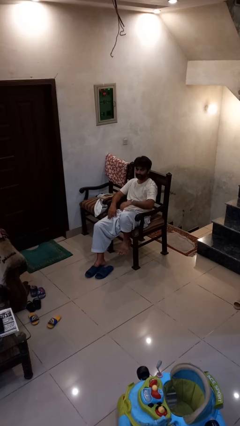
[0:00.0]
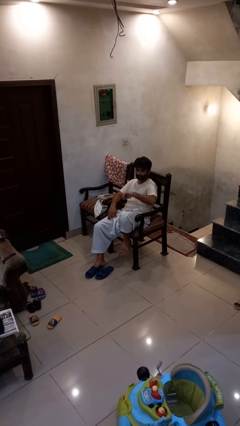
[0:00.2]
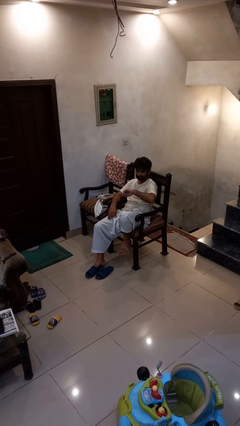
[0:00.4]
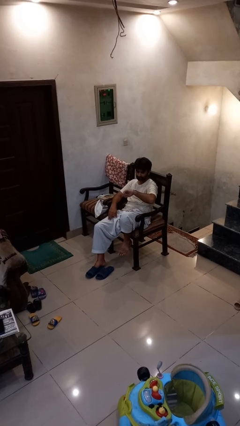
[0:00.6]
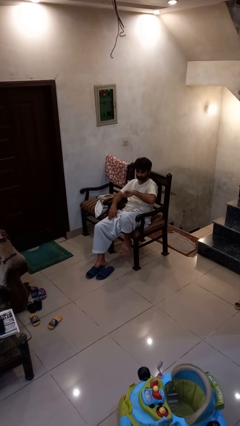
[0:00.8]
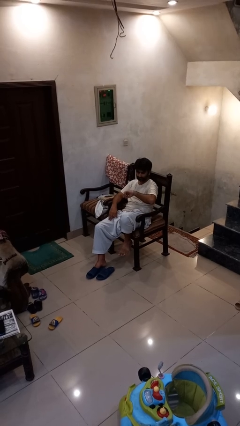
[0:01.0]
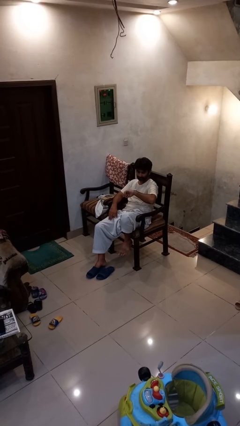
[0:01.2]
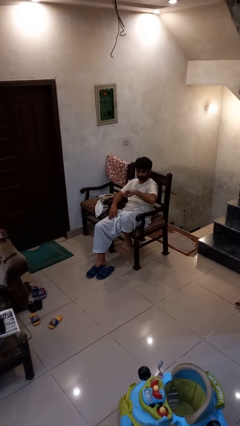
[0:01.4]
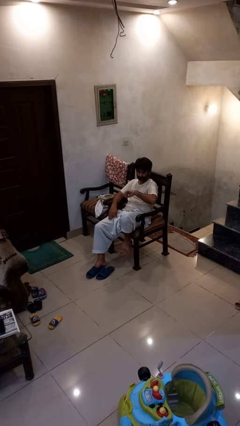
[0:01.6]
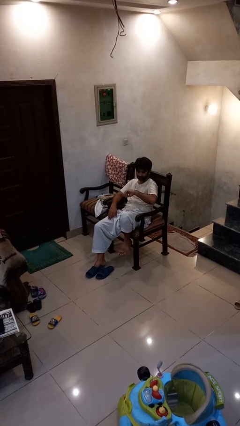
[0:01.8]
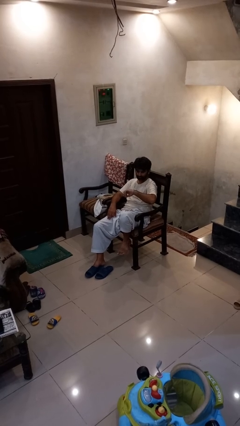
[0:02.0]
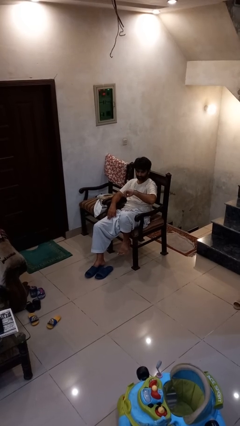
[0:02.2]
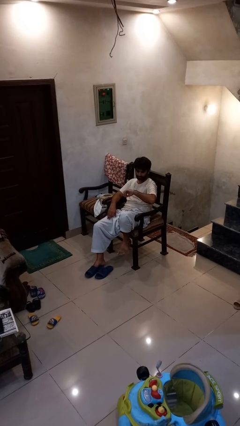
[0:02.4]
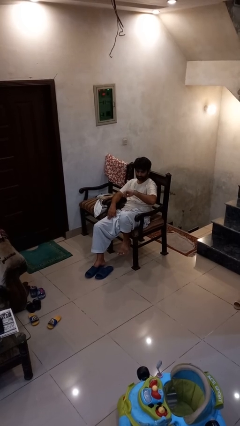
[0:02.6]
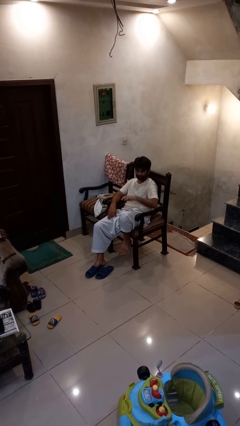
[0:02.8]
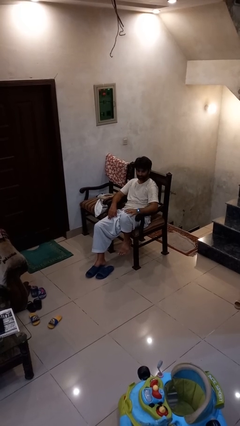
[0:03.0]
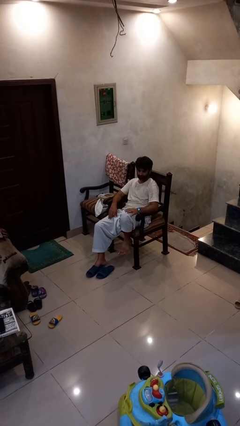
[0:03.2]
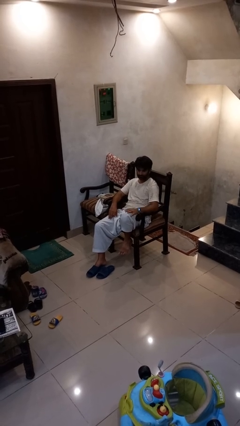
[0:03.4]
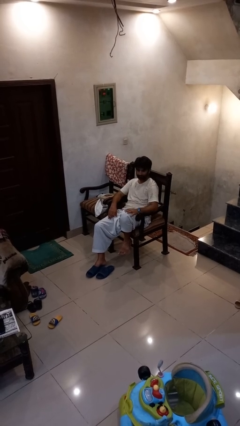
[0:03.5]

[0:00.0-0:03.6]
person looks at wristwatch

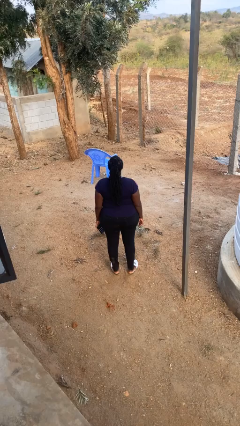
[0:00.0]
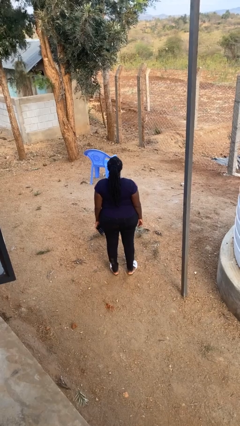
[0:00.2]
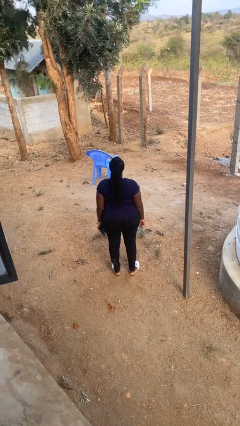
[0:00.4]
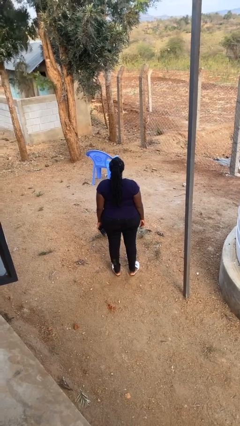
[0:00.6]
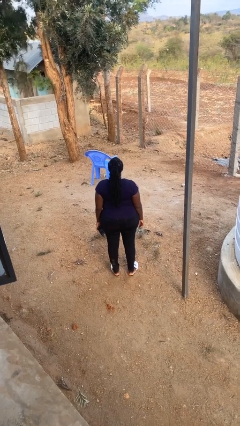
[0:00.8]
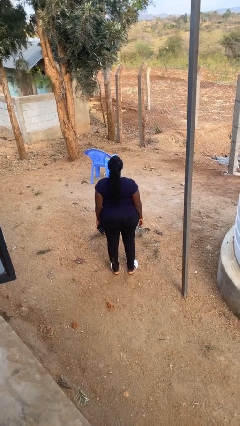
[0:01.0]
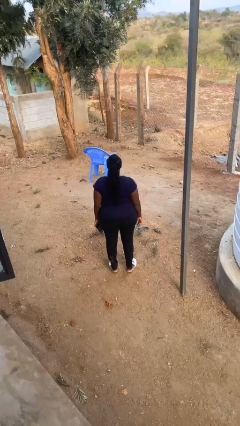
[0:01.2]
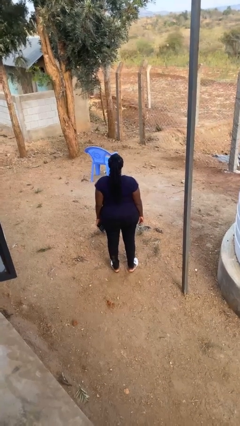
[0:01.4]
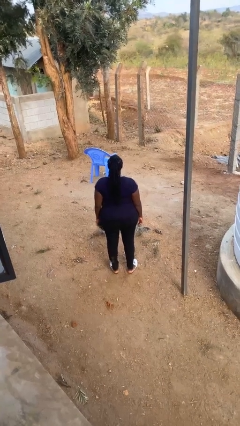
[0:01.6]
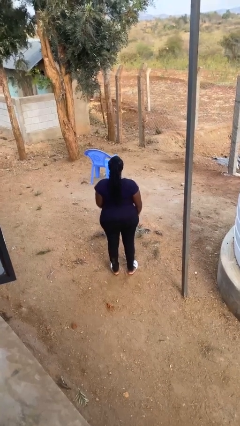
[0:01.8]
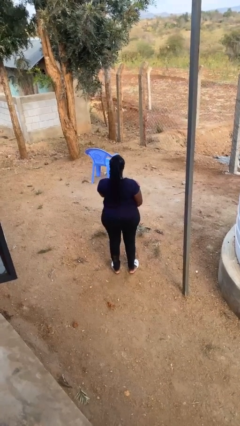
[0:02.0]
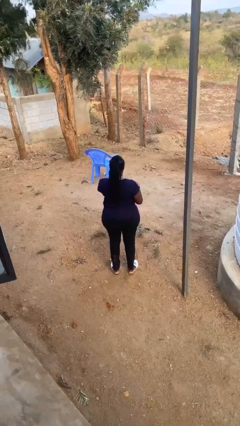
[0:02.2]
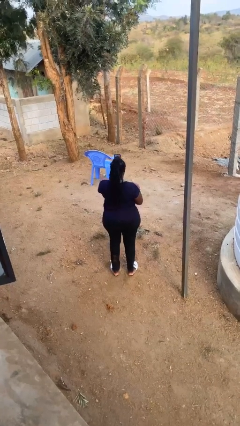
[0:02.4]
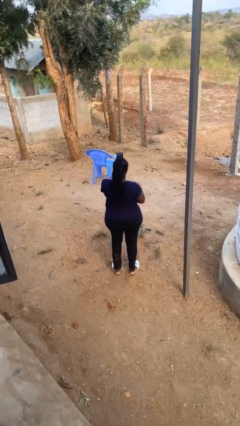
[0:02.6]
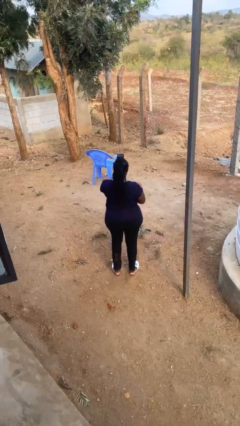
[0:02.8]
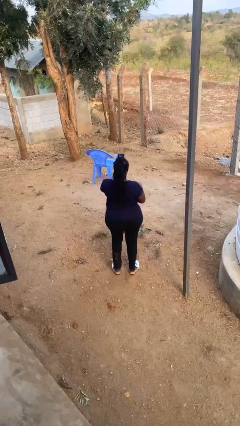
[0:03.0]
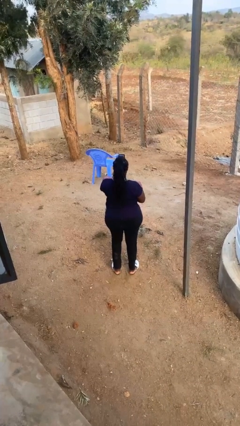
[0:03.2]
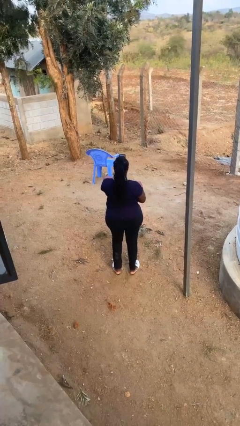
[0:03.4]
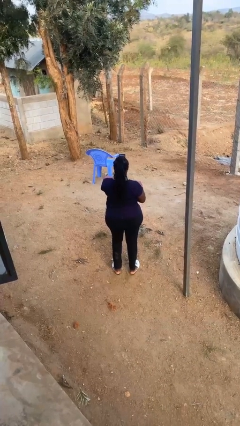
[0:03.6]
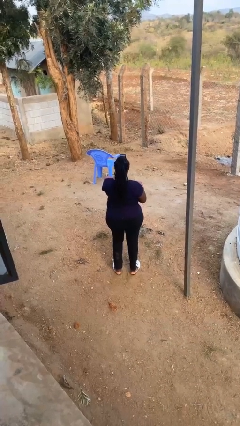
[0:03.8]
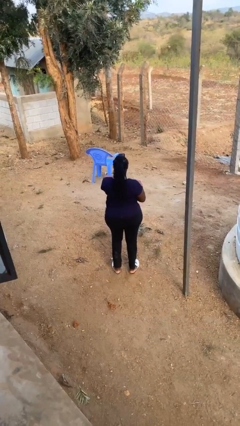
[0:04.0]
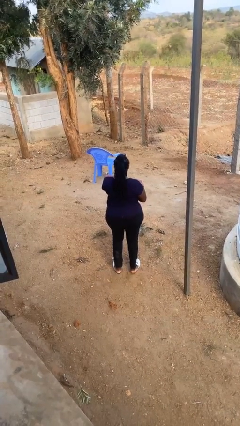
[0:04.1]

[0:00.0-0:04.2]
person takes selfie

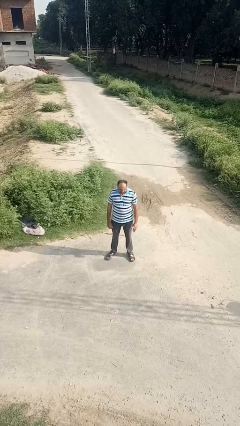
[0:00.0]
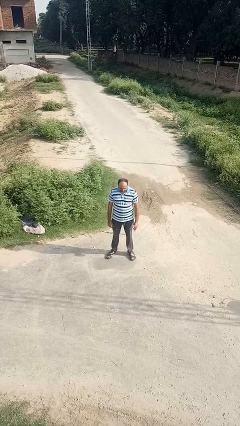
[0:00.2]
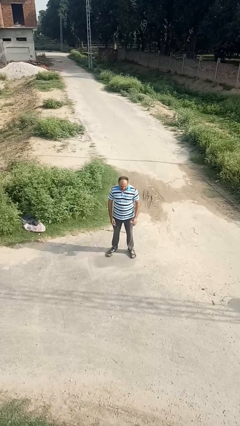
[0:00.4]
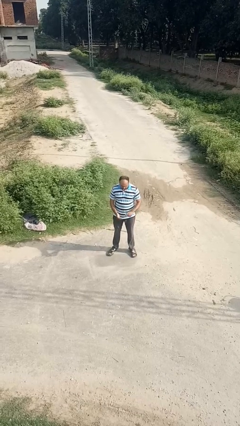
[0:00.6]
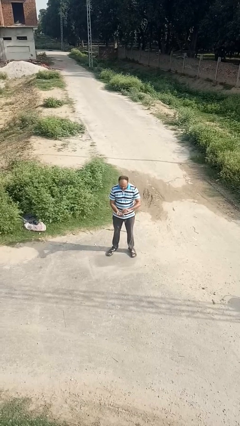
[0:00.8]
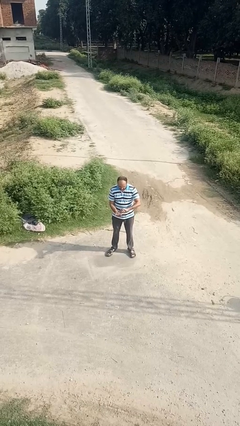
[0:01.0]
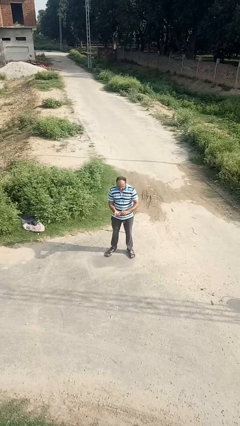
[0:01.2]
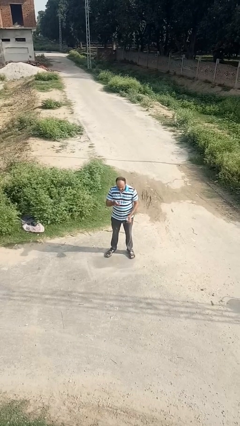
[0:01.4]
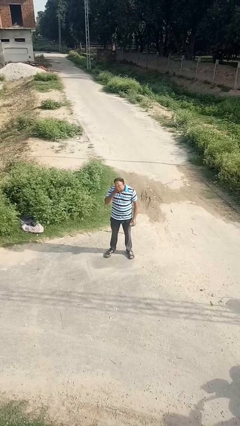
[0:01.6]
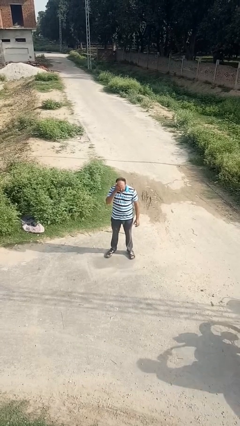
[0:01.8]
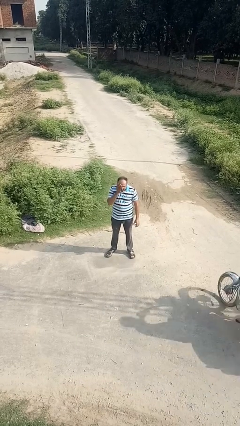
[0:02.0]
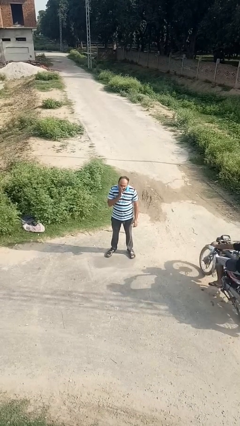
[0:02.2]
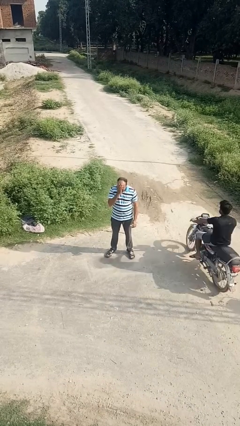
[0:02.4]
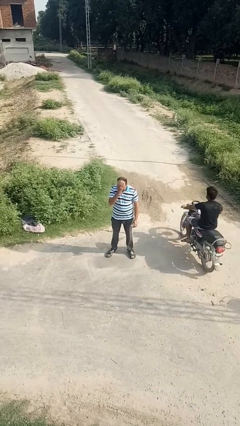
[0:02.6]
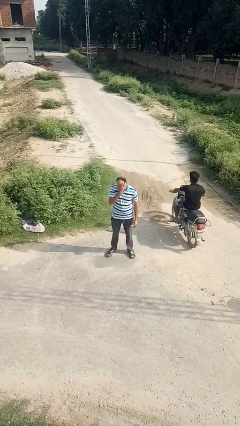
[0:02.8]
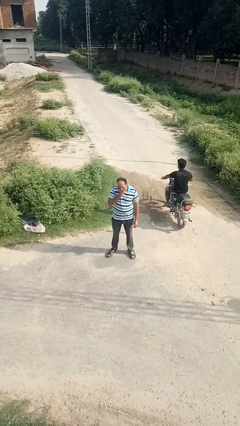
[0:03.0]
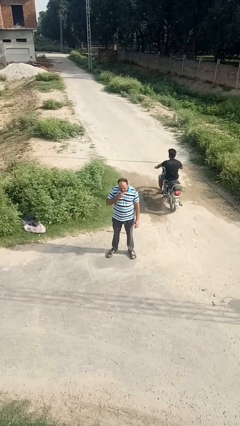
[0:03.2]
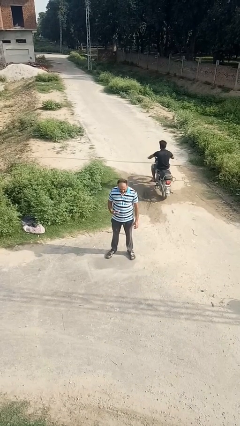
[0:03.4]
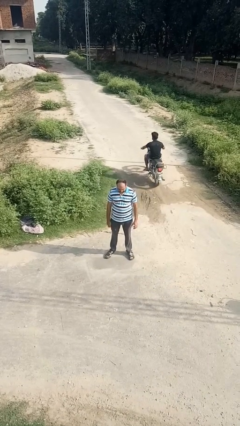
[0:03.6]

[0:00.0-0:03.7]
person applies facial moisturizer

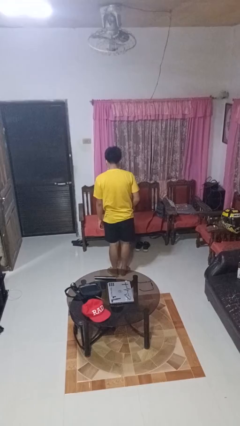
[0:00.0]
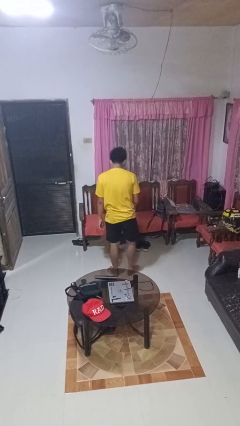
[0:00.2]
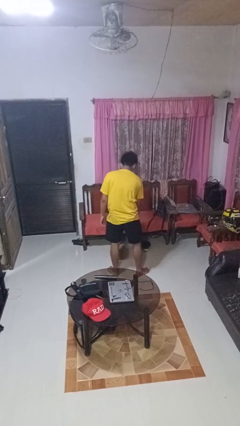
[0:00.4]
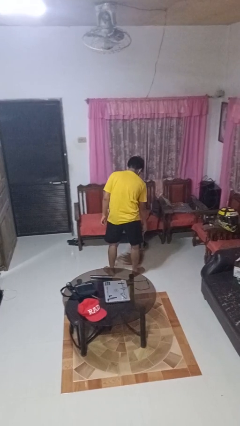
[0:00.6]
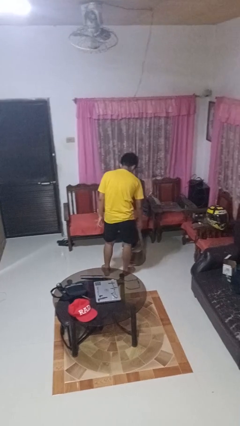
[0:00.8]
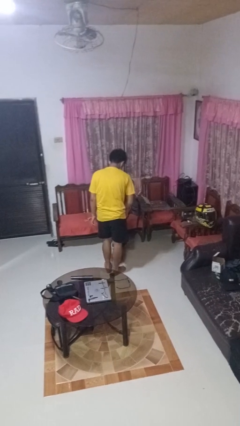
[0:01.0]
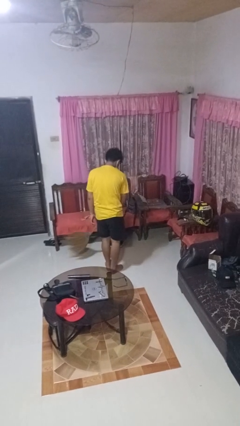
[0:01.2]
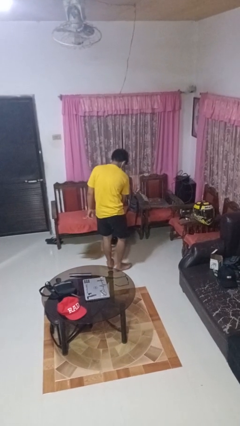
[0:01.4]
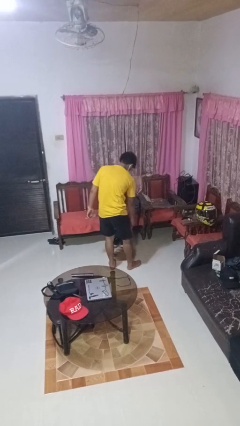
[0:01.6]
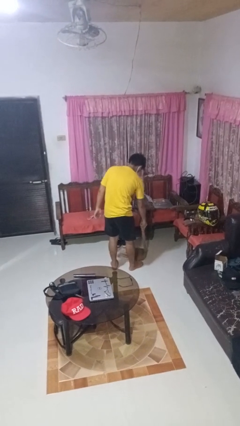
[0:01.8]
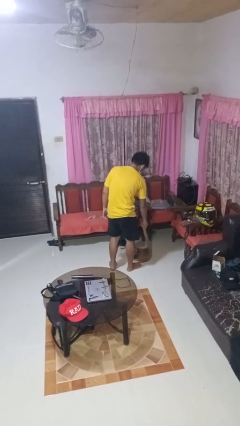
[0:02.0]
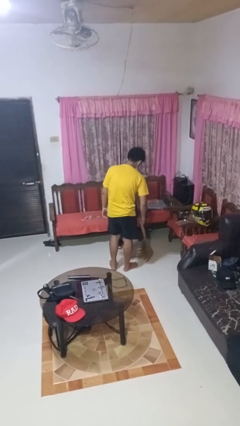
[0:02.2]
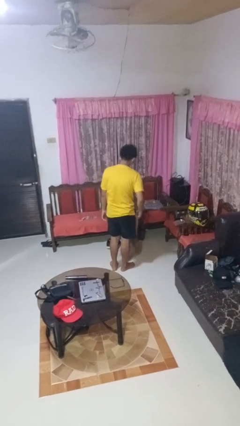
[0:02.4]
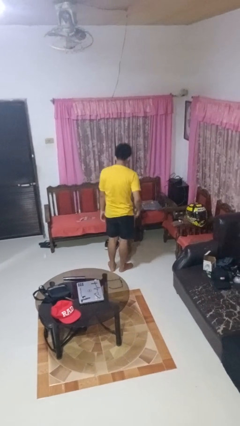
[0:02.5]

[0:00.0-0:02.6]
person sweeps floor

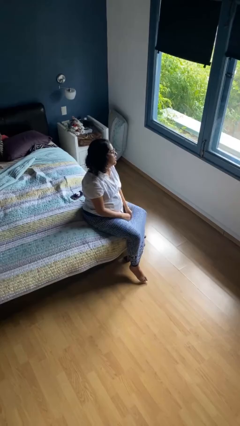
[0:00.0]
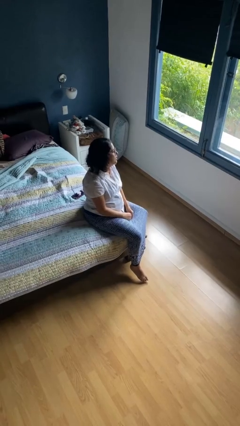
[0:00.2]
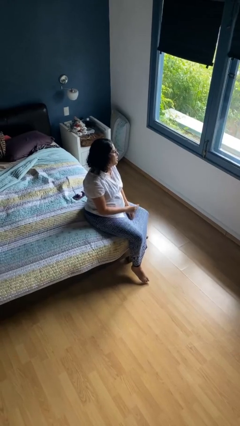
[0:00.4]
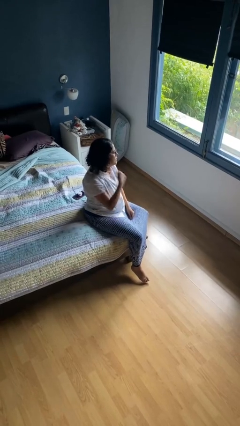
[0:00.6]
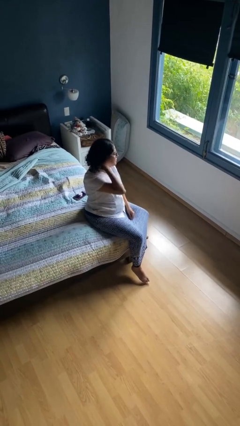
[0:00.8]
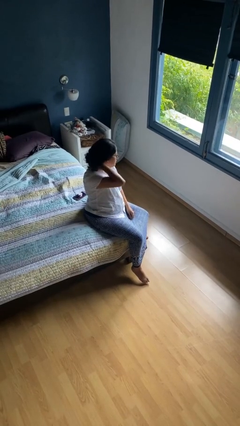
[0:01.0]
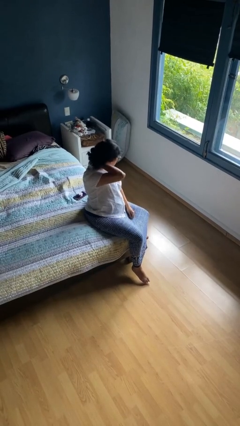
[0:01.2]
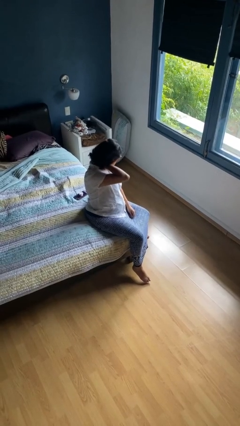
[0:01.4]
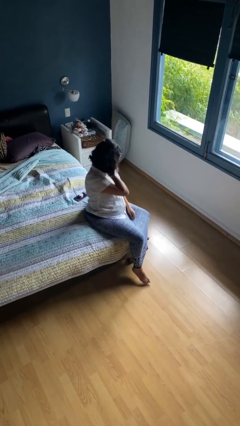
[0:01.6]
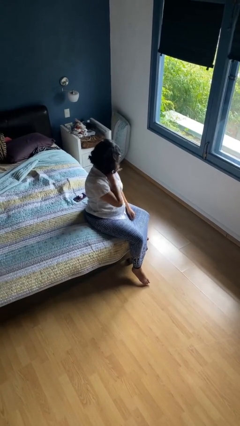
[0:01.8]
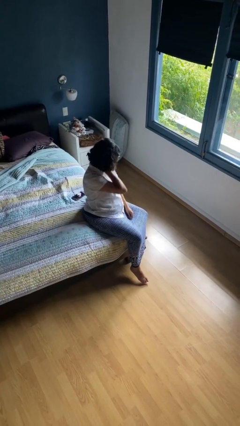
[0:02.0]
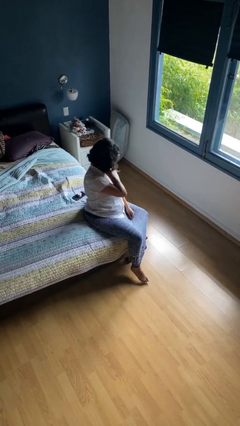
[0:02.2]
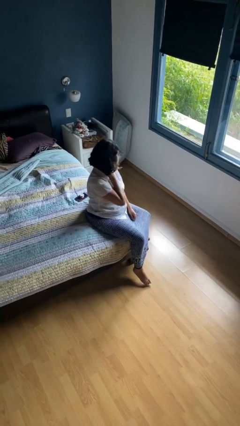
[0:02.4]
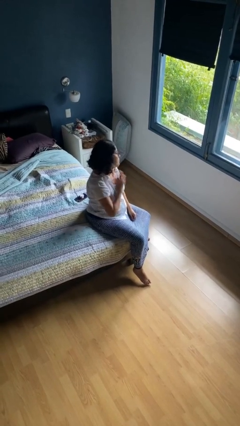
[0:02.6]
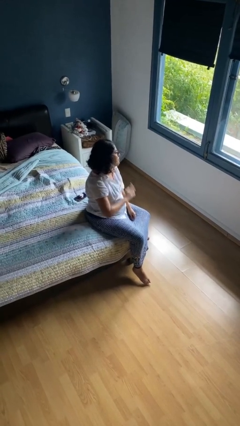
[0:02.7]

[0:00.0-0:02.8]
person rubs neck

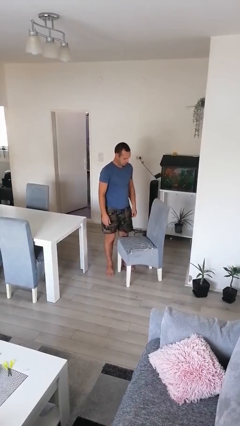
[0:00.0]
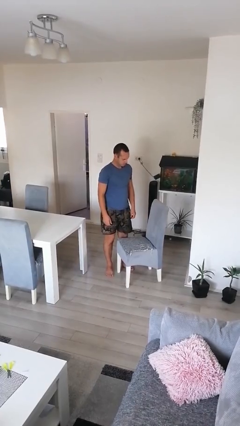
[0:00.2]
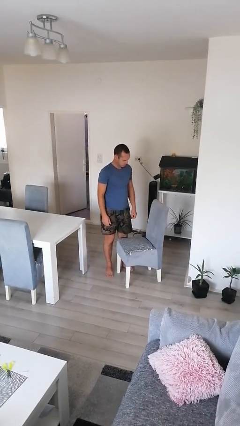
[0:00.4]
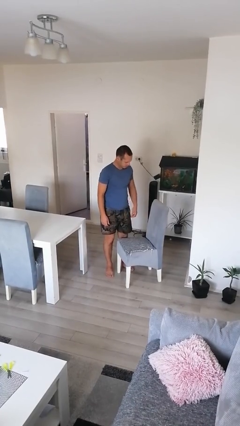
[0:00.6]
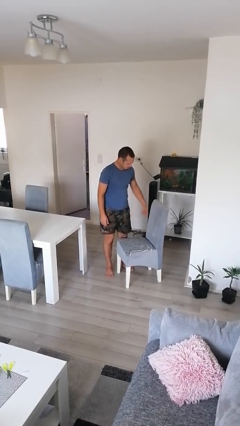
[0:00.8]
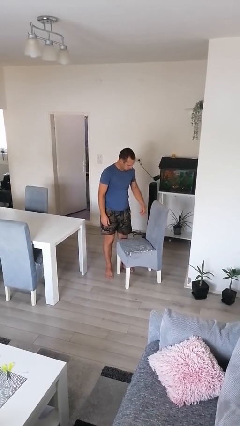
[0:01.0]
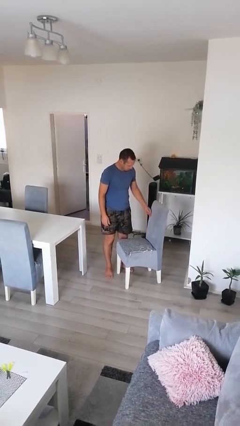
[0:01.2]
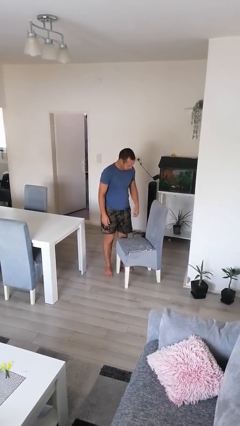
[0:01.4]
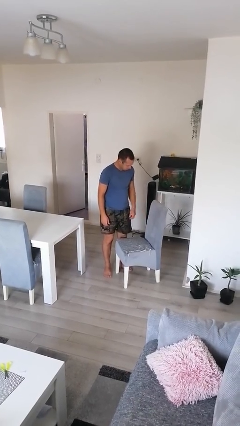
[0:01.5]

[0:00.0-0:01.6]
person knocks over furniture
